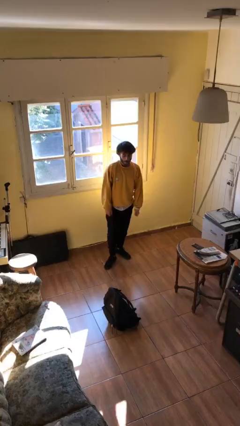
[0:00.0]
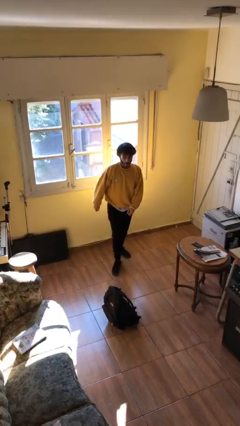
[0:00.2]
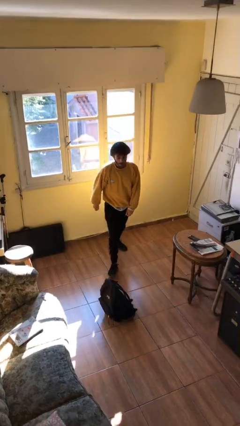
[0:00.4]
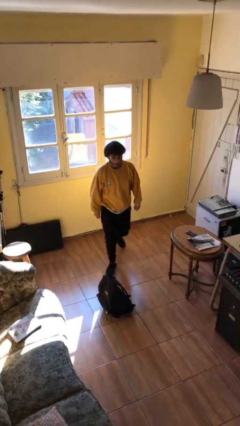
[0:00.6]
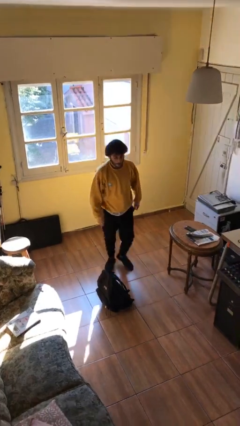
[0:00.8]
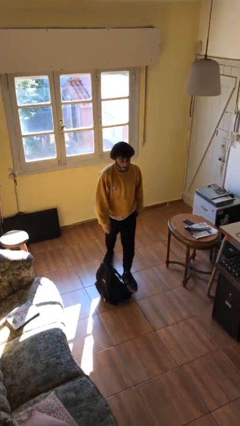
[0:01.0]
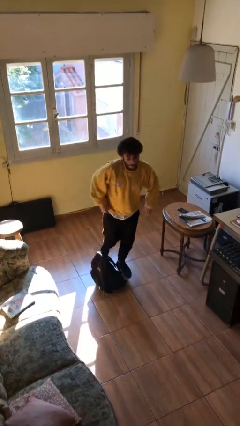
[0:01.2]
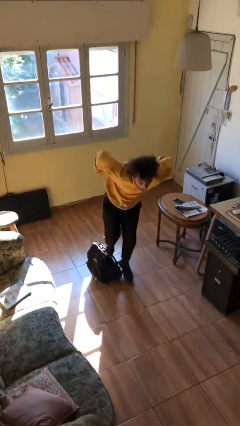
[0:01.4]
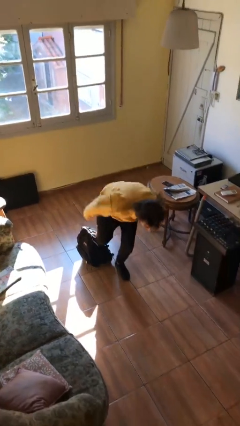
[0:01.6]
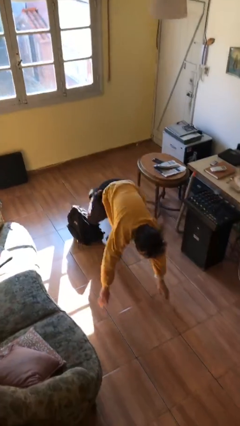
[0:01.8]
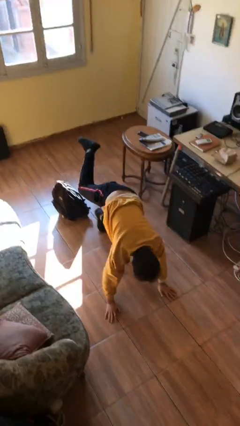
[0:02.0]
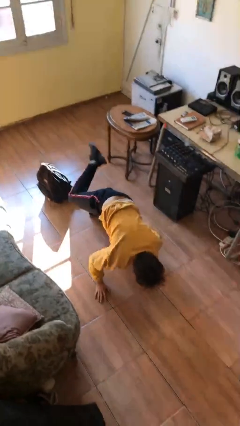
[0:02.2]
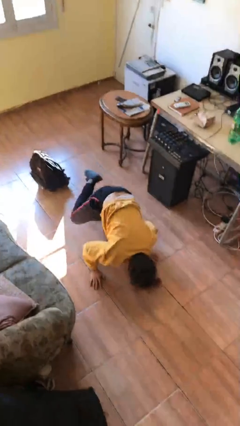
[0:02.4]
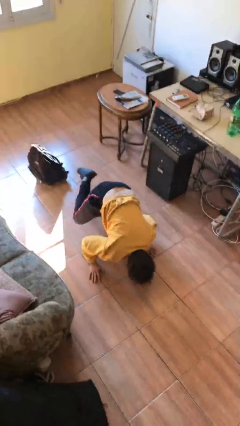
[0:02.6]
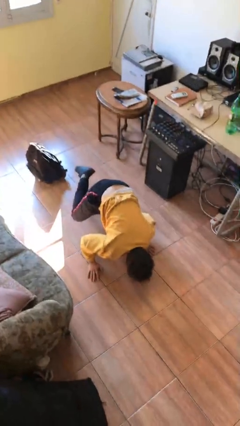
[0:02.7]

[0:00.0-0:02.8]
person trips on object on floor

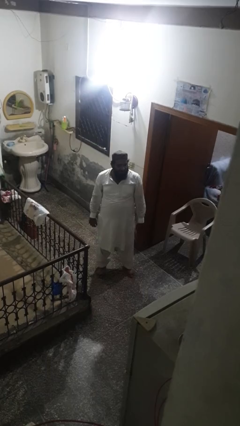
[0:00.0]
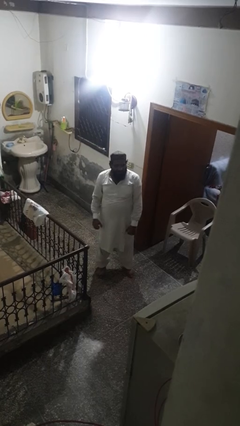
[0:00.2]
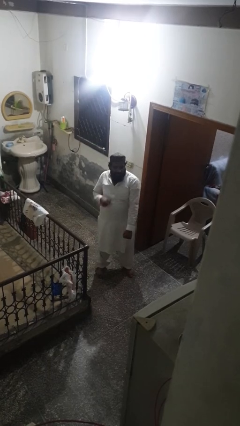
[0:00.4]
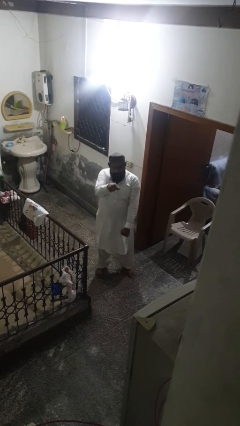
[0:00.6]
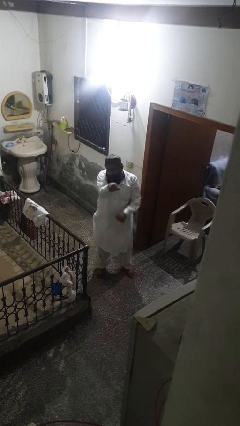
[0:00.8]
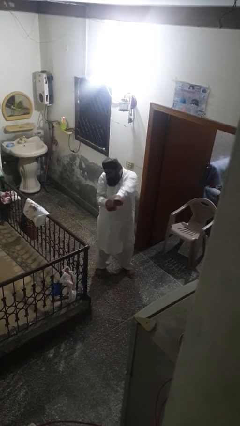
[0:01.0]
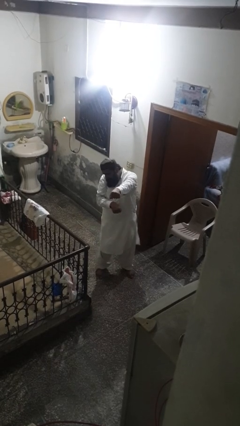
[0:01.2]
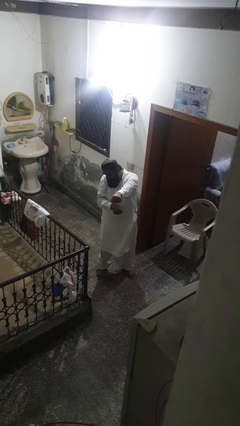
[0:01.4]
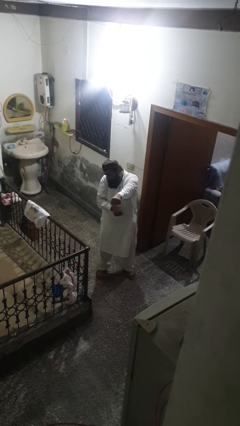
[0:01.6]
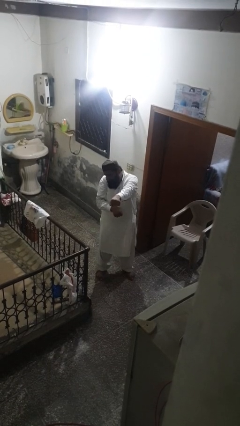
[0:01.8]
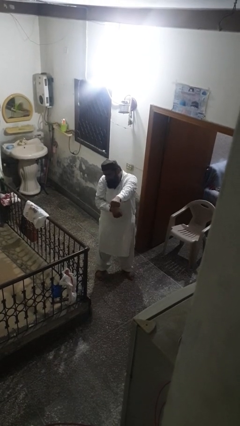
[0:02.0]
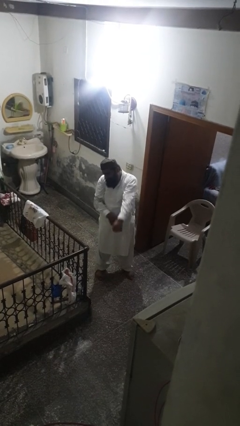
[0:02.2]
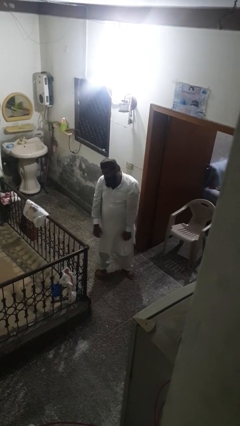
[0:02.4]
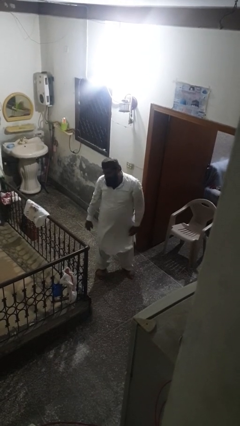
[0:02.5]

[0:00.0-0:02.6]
person punches

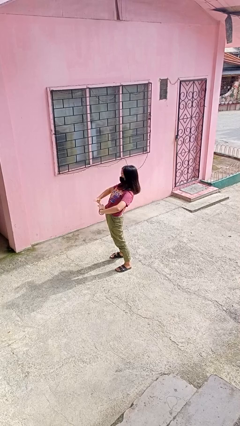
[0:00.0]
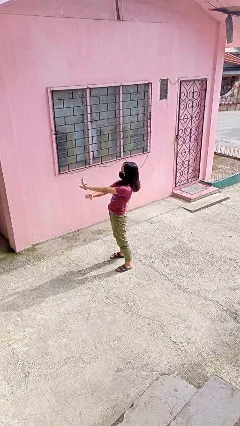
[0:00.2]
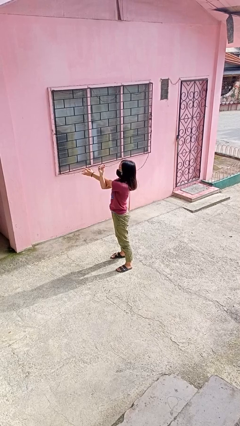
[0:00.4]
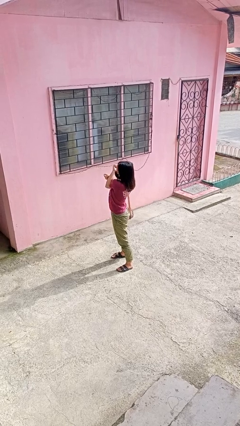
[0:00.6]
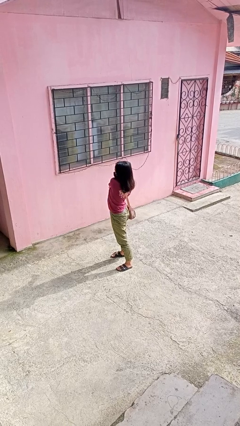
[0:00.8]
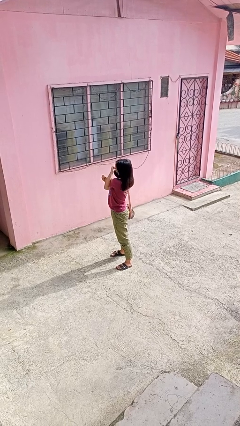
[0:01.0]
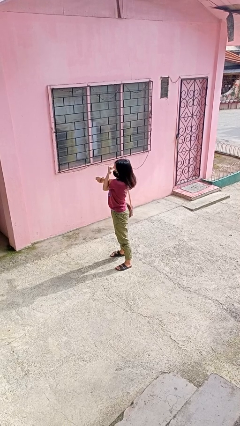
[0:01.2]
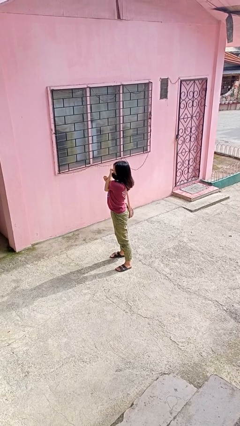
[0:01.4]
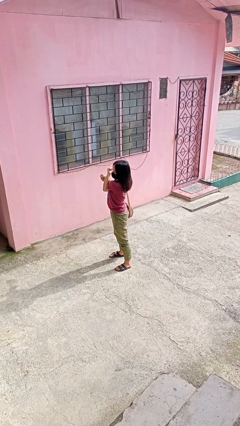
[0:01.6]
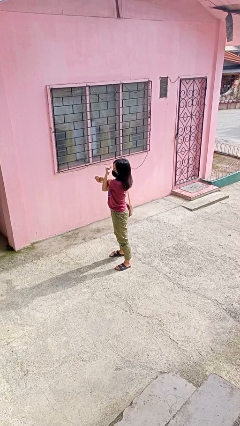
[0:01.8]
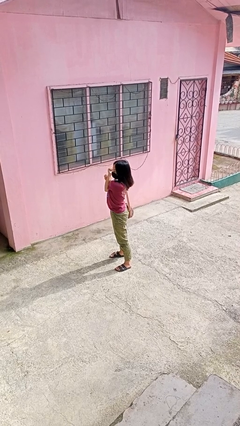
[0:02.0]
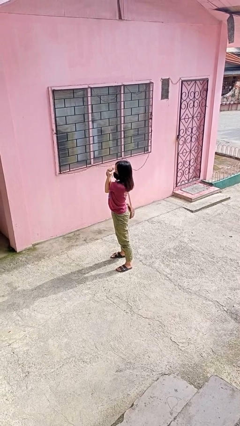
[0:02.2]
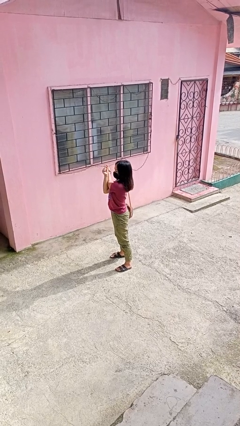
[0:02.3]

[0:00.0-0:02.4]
person stretches arms to side

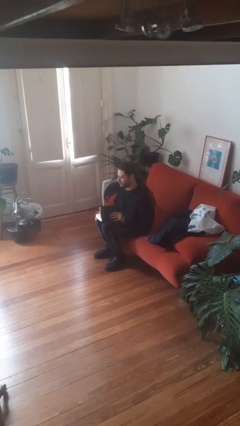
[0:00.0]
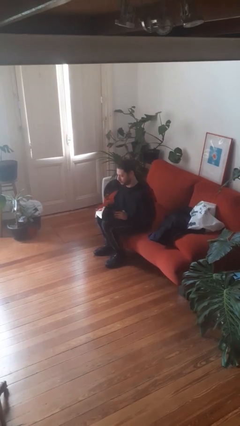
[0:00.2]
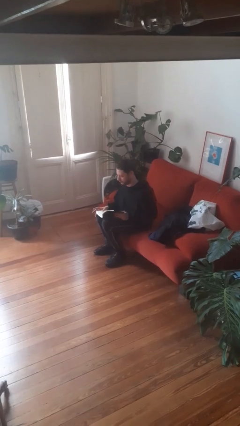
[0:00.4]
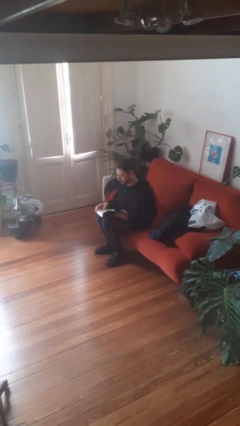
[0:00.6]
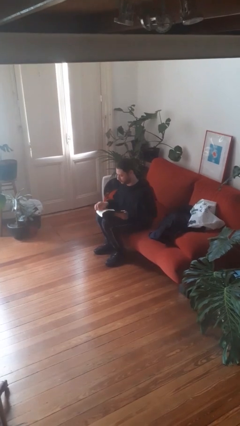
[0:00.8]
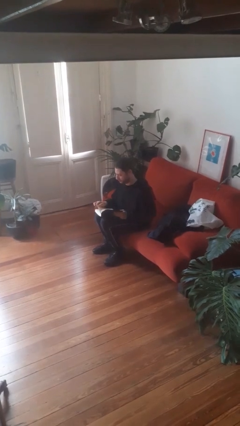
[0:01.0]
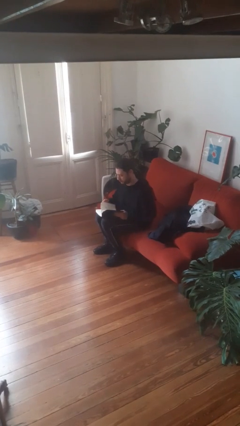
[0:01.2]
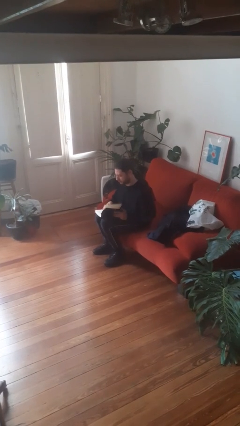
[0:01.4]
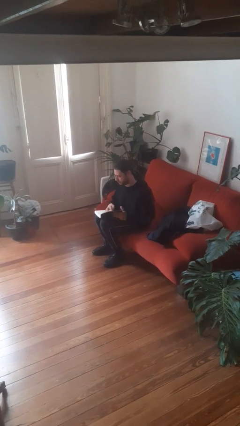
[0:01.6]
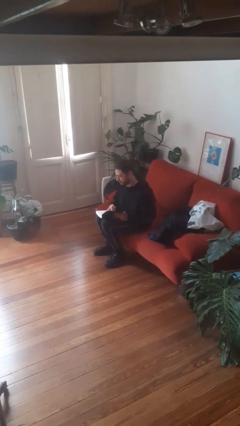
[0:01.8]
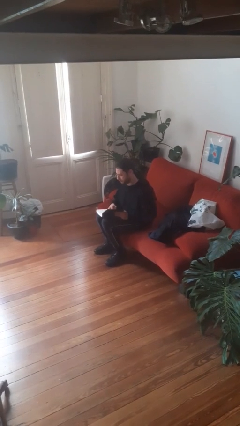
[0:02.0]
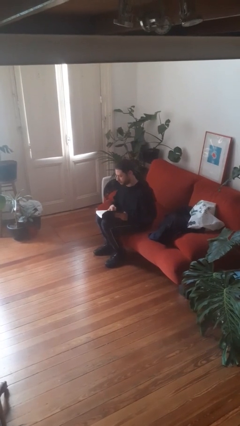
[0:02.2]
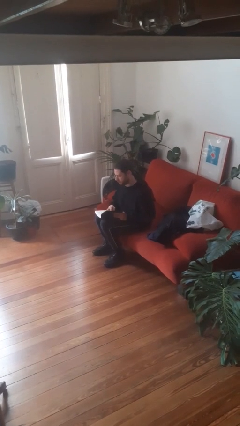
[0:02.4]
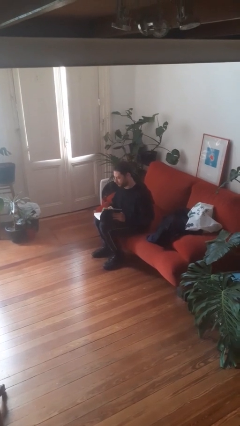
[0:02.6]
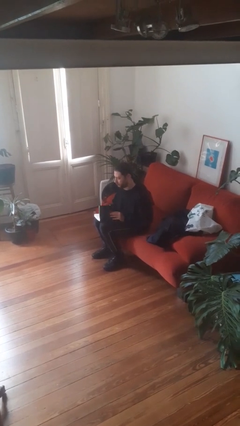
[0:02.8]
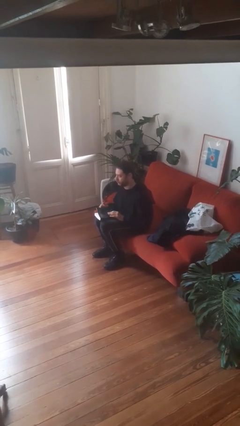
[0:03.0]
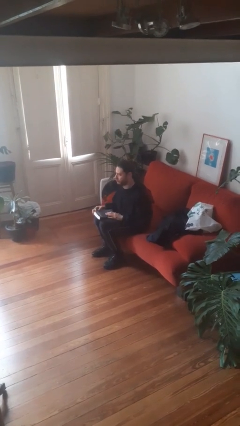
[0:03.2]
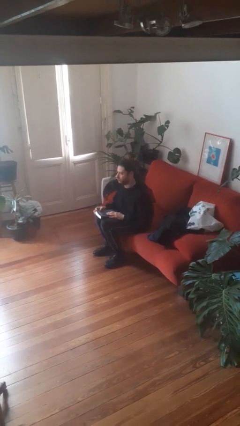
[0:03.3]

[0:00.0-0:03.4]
person reads book

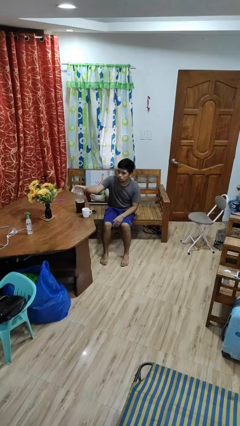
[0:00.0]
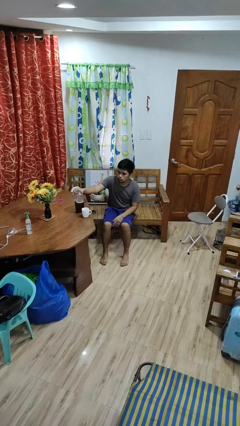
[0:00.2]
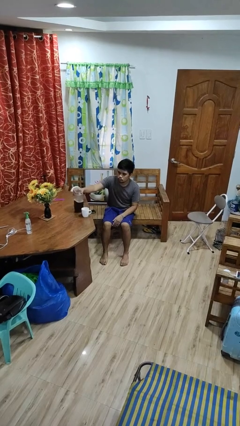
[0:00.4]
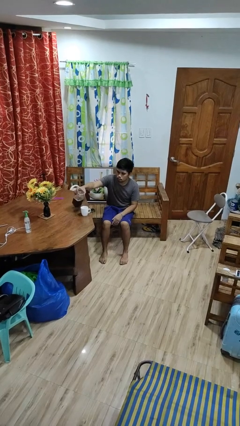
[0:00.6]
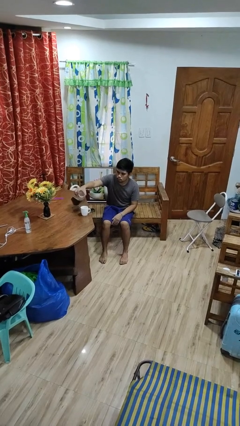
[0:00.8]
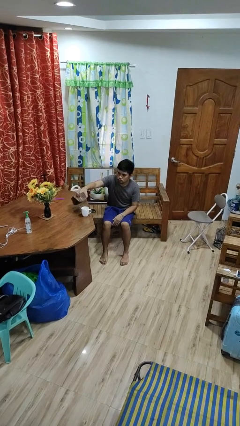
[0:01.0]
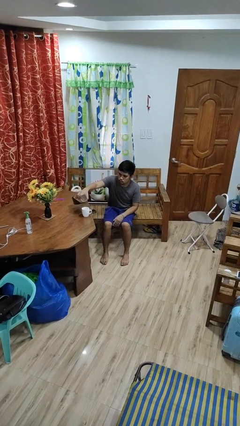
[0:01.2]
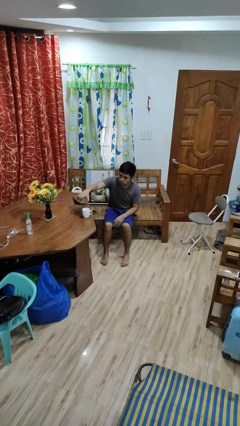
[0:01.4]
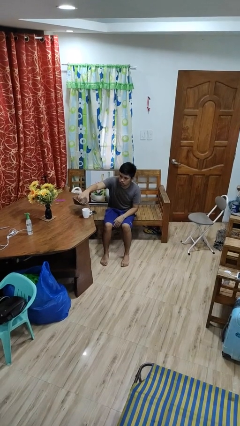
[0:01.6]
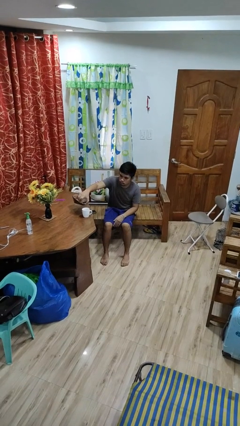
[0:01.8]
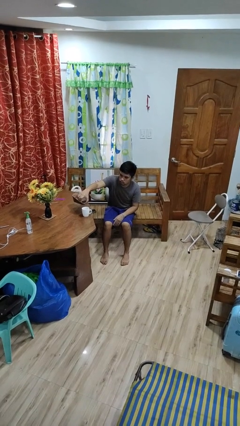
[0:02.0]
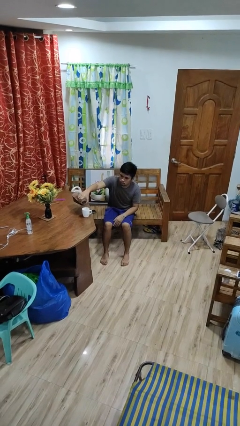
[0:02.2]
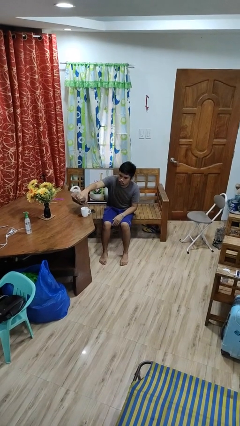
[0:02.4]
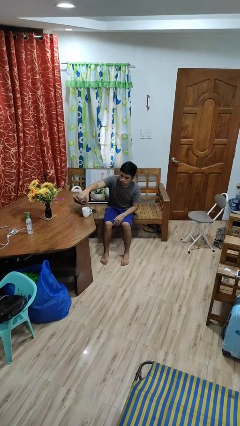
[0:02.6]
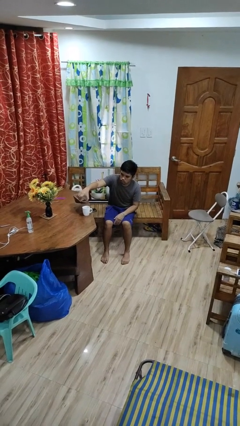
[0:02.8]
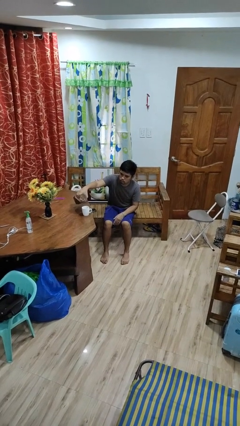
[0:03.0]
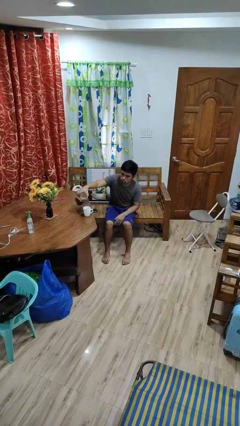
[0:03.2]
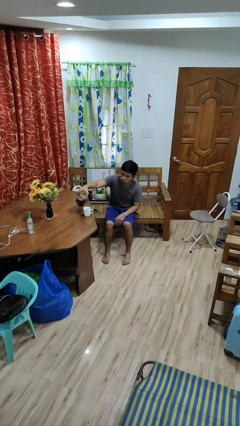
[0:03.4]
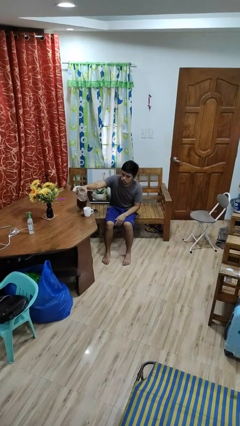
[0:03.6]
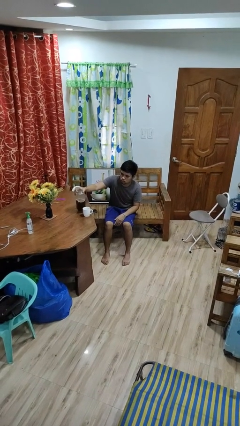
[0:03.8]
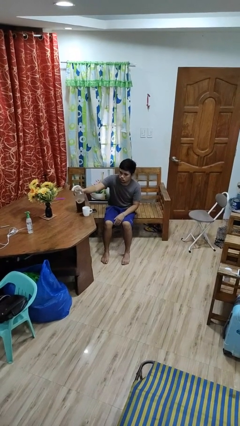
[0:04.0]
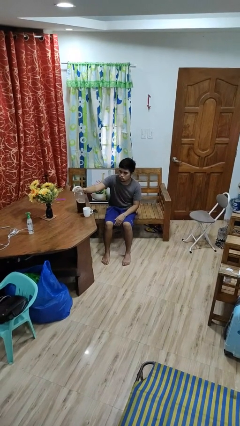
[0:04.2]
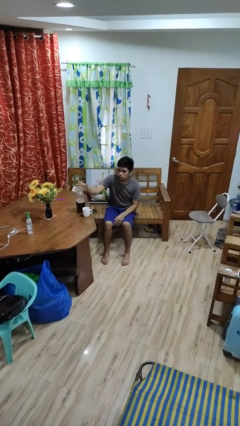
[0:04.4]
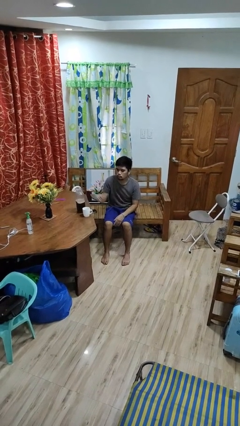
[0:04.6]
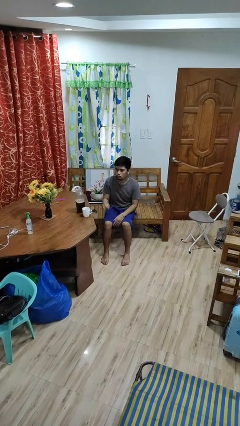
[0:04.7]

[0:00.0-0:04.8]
person pours coffee into mug

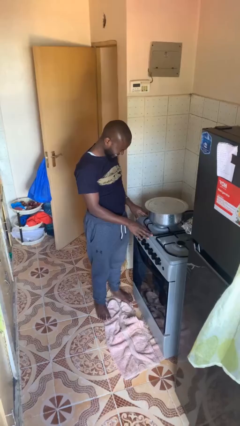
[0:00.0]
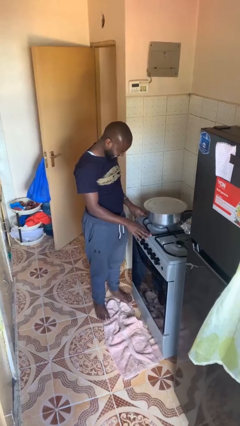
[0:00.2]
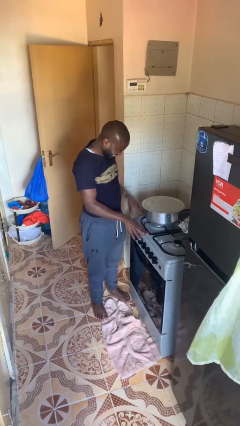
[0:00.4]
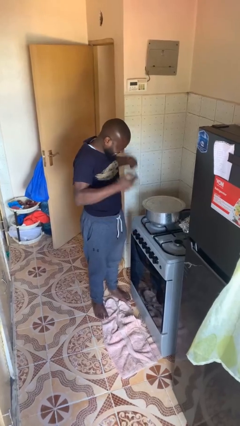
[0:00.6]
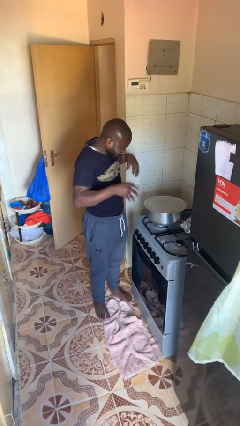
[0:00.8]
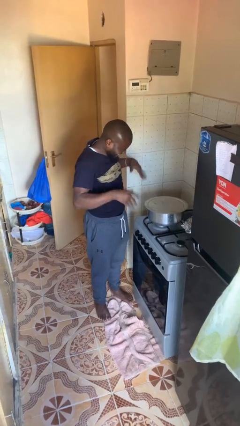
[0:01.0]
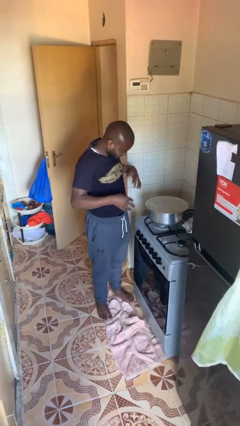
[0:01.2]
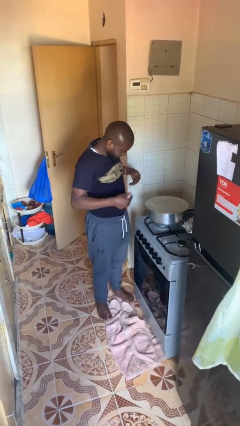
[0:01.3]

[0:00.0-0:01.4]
person burns hand
